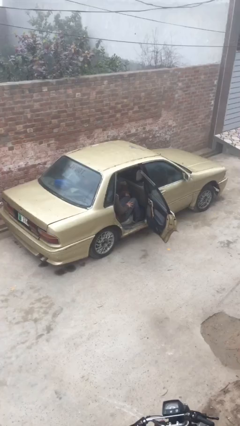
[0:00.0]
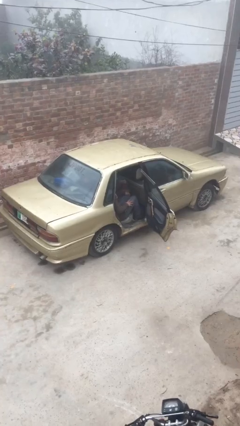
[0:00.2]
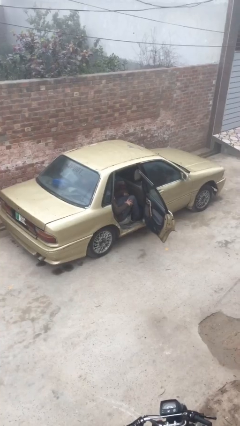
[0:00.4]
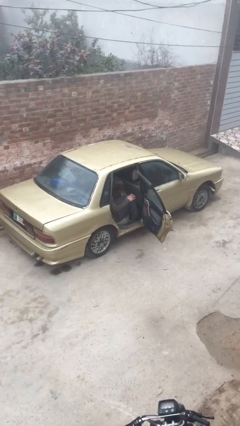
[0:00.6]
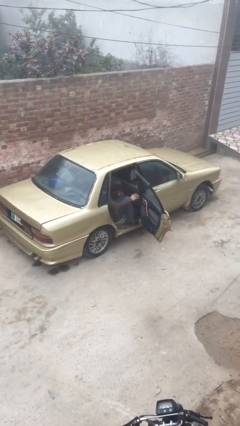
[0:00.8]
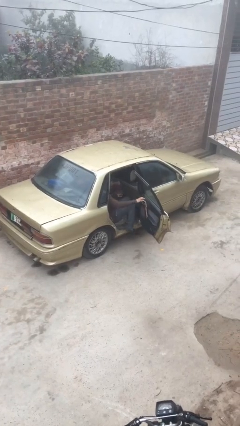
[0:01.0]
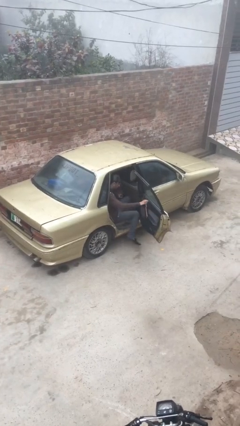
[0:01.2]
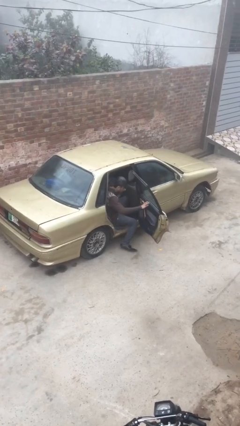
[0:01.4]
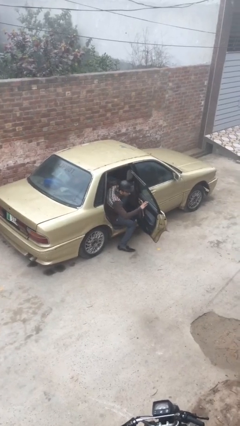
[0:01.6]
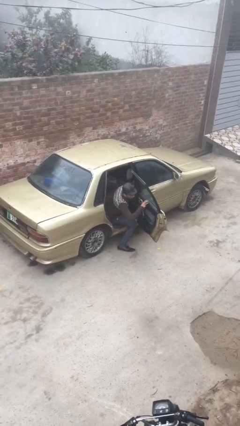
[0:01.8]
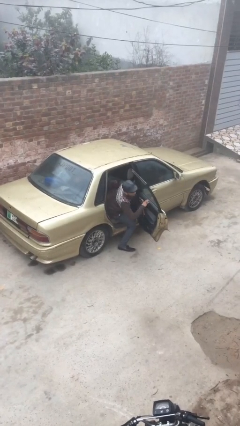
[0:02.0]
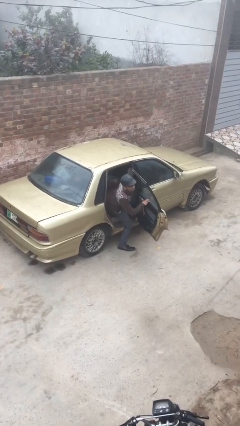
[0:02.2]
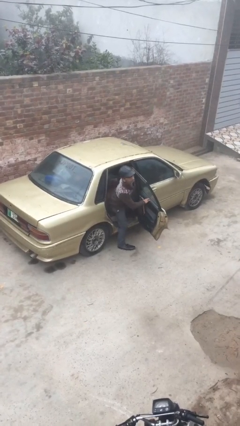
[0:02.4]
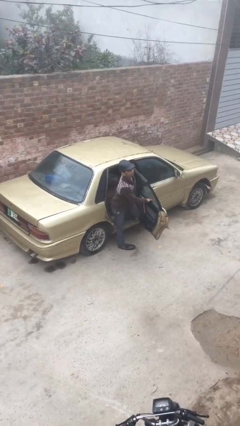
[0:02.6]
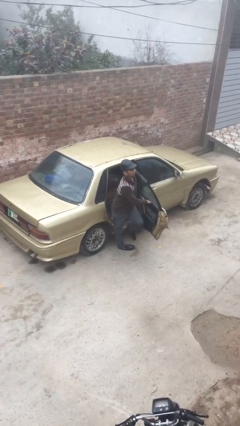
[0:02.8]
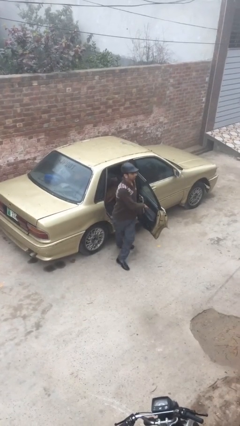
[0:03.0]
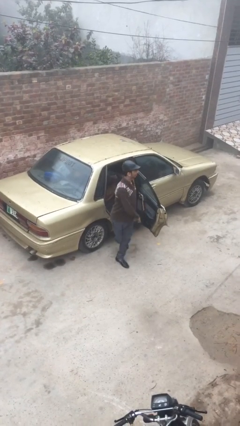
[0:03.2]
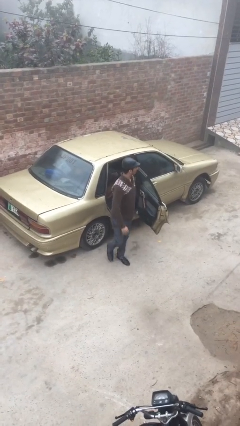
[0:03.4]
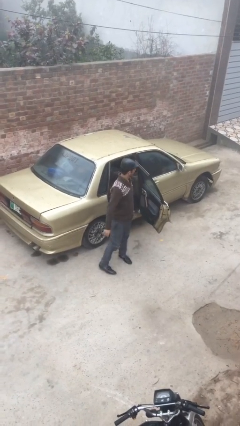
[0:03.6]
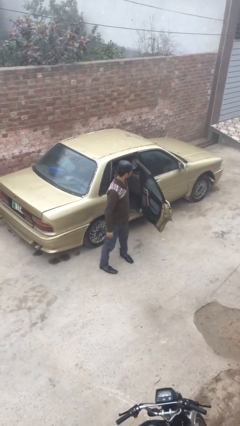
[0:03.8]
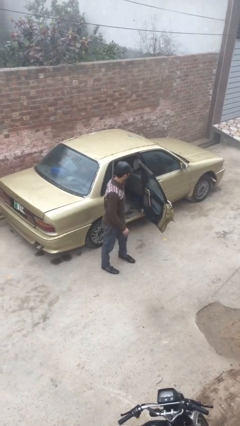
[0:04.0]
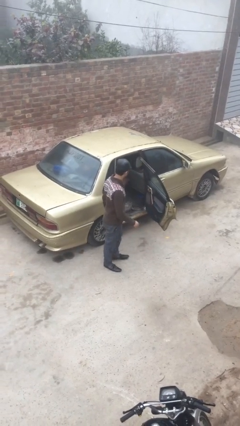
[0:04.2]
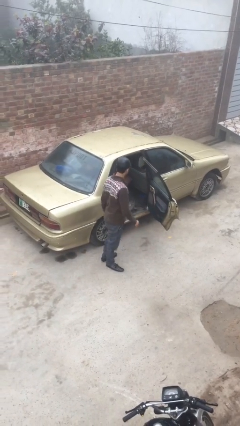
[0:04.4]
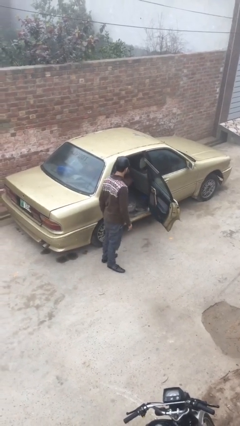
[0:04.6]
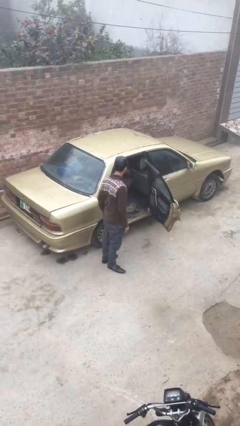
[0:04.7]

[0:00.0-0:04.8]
person exits car

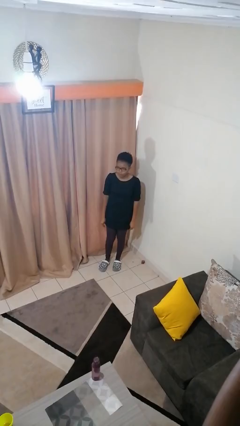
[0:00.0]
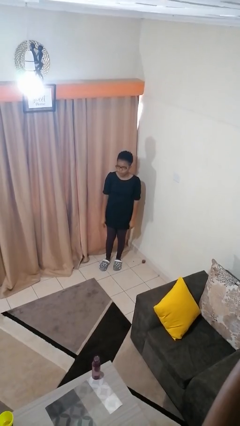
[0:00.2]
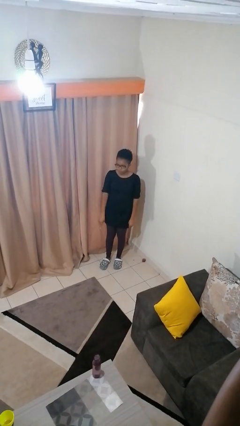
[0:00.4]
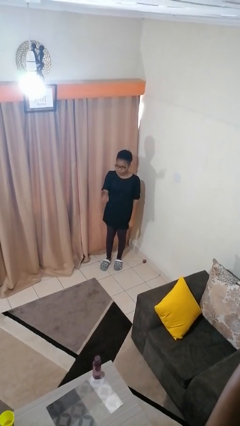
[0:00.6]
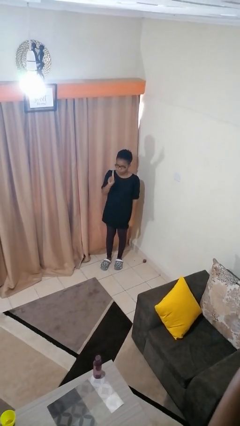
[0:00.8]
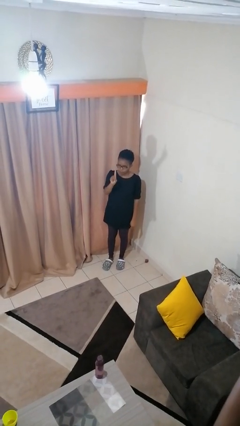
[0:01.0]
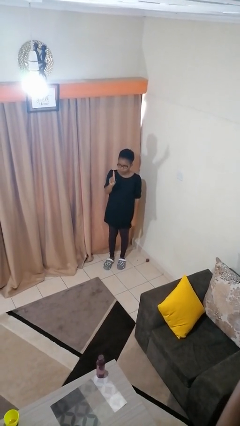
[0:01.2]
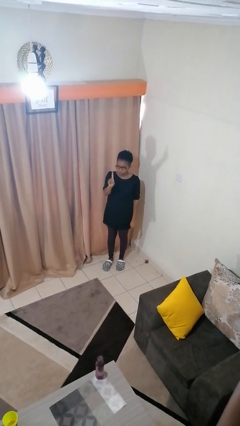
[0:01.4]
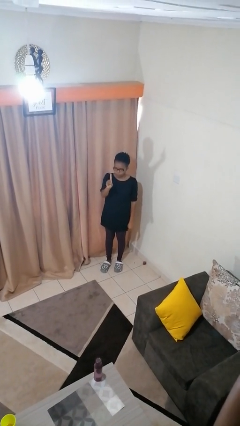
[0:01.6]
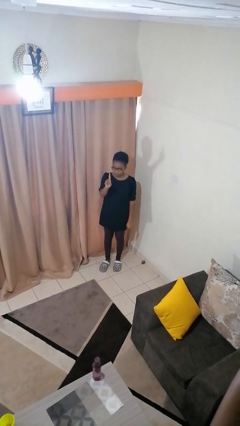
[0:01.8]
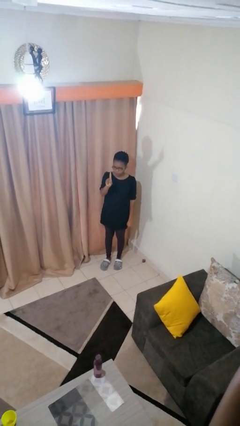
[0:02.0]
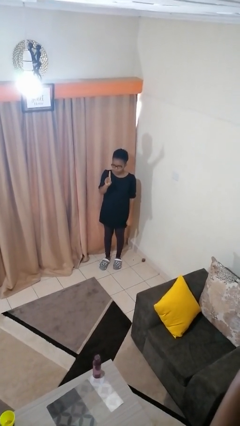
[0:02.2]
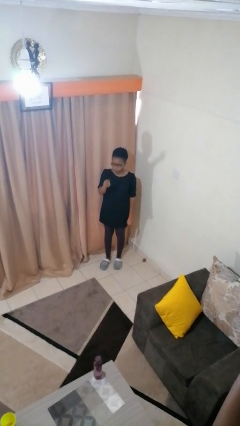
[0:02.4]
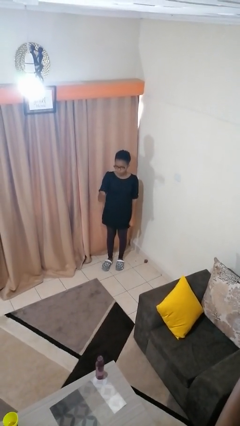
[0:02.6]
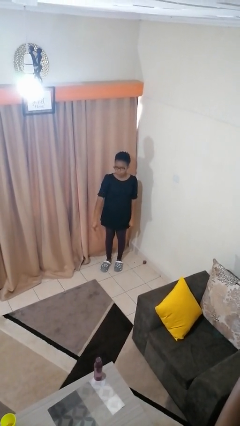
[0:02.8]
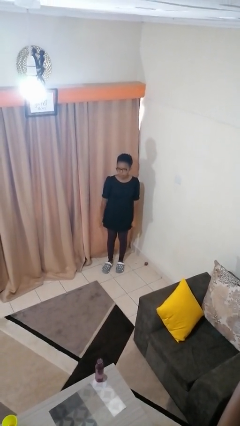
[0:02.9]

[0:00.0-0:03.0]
person gestures number one

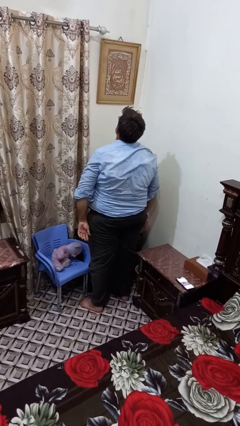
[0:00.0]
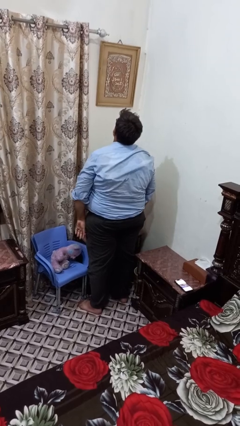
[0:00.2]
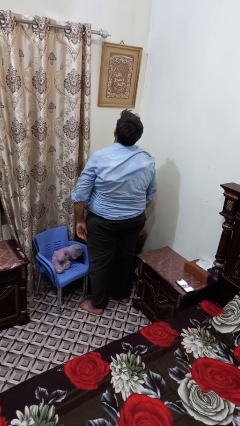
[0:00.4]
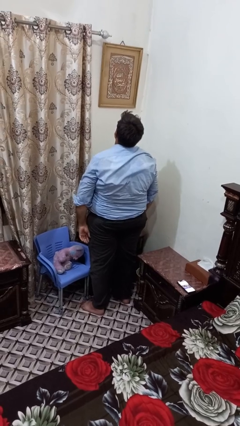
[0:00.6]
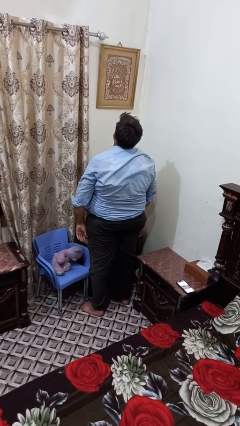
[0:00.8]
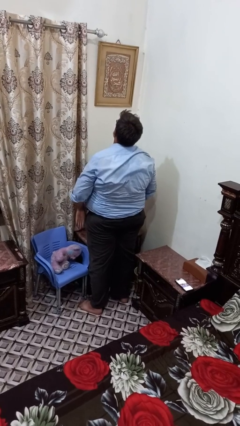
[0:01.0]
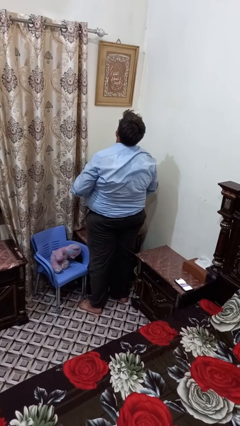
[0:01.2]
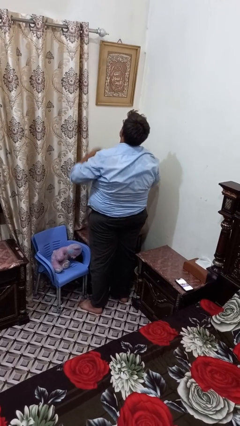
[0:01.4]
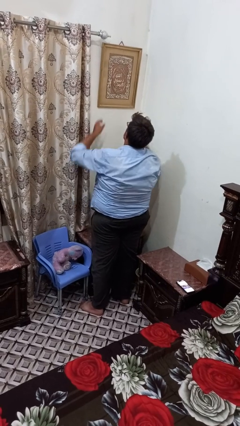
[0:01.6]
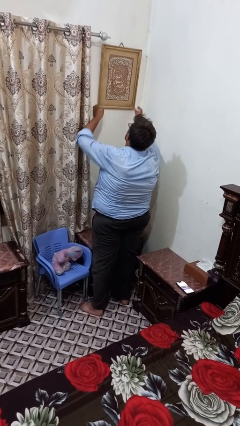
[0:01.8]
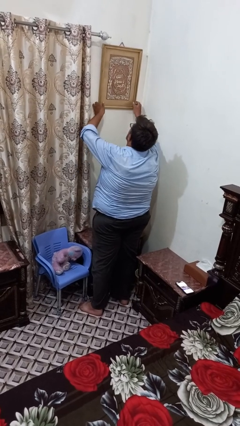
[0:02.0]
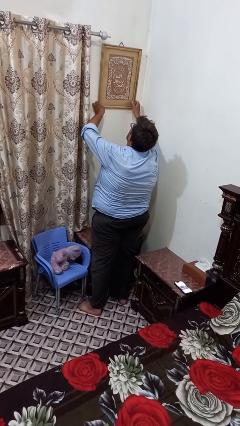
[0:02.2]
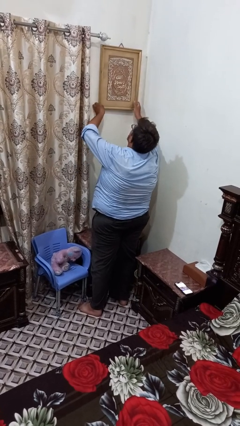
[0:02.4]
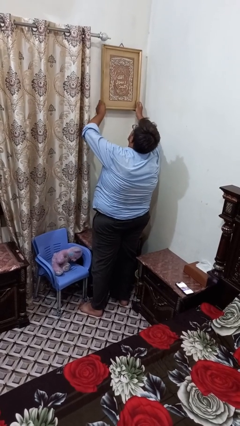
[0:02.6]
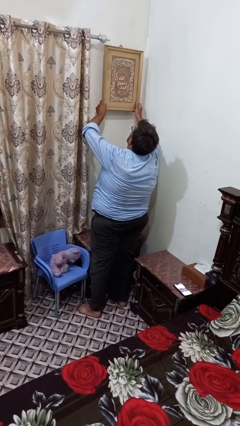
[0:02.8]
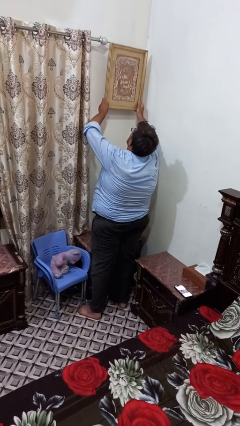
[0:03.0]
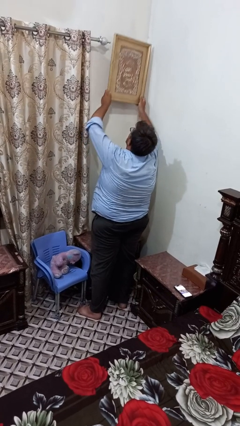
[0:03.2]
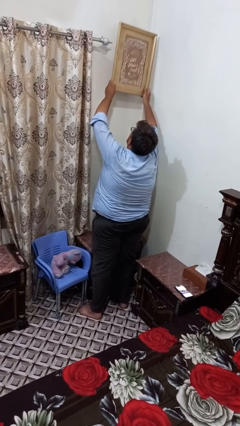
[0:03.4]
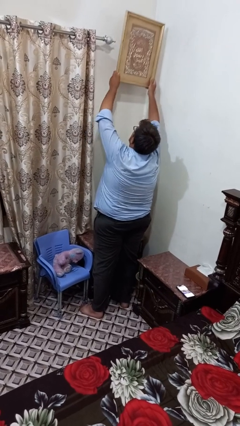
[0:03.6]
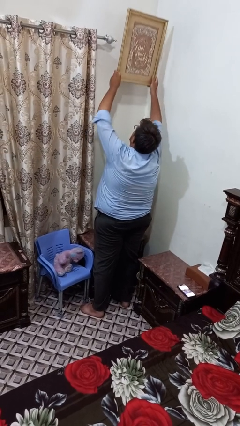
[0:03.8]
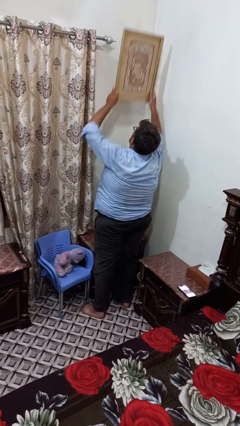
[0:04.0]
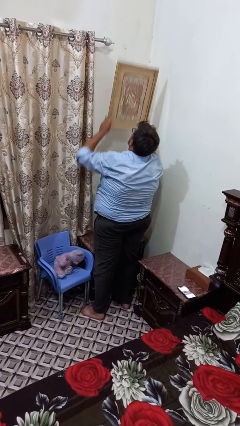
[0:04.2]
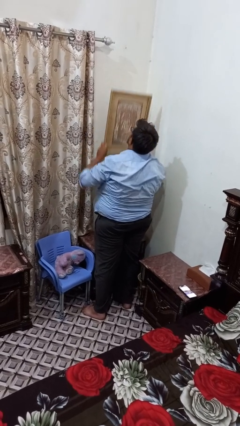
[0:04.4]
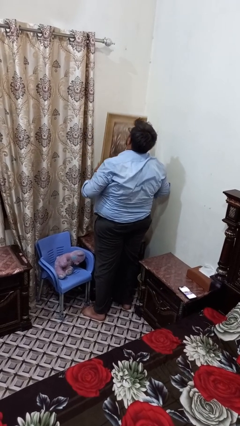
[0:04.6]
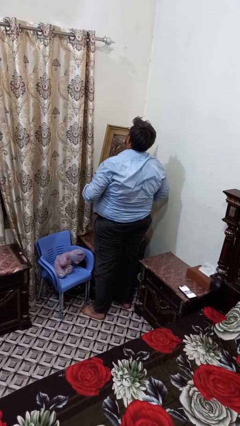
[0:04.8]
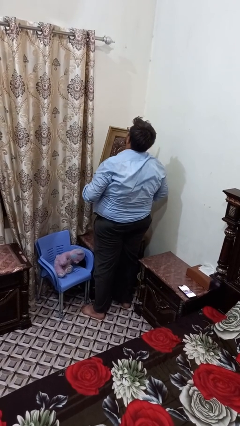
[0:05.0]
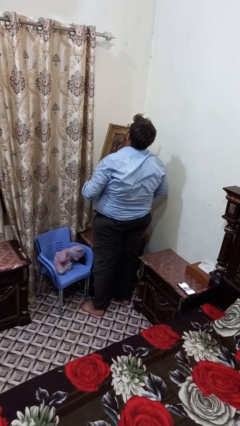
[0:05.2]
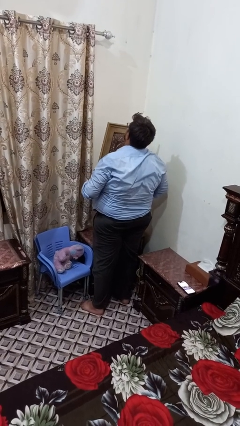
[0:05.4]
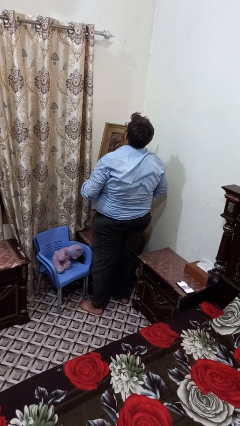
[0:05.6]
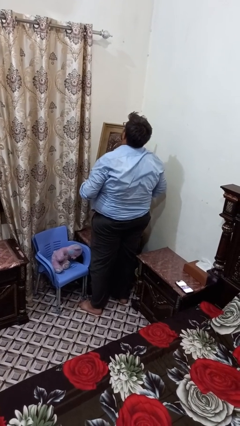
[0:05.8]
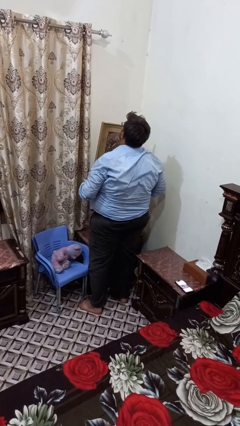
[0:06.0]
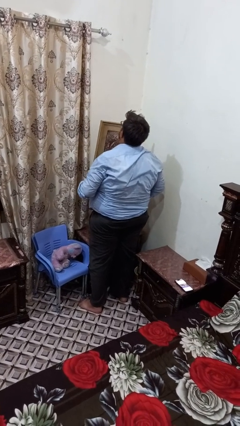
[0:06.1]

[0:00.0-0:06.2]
person takes down picture frame

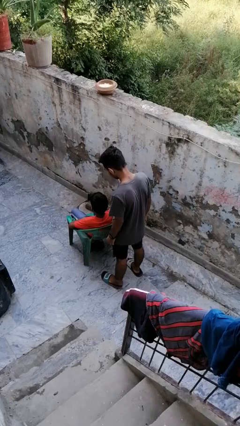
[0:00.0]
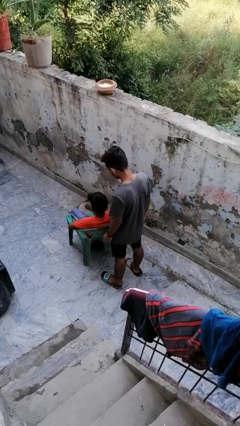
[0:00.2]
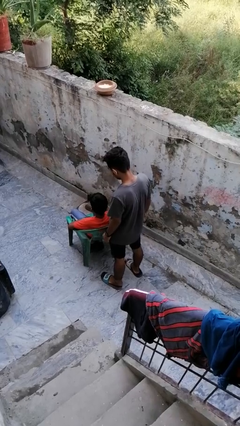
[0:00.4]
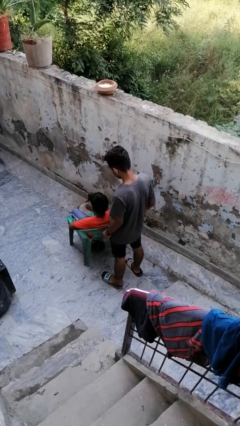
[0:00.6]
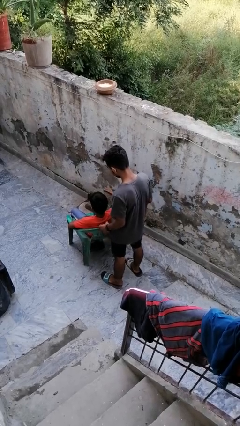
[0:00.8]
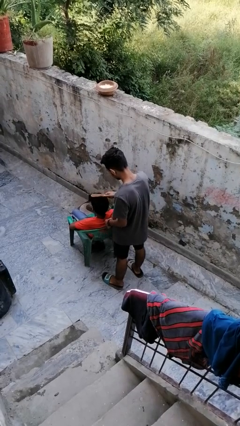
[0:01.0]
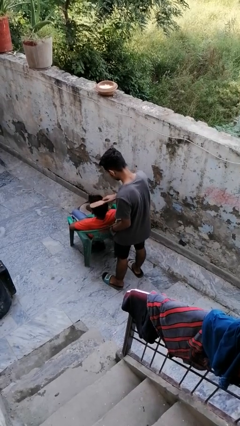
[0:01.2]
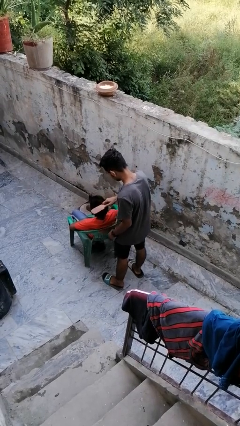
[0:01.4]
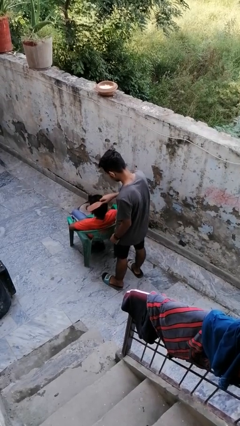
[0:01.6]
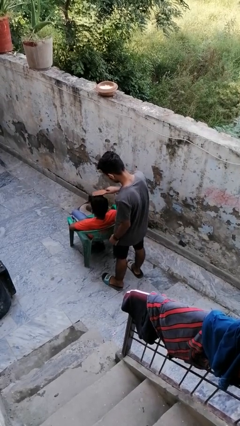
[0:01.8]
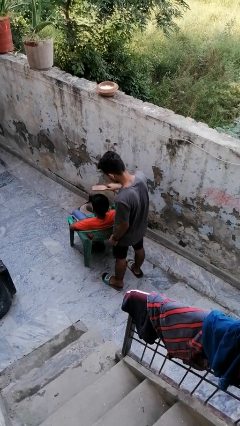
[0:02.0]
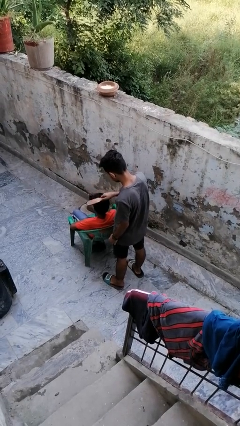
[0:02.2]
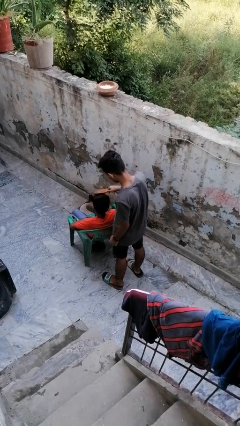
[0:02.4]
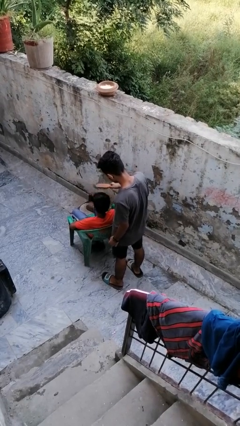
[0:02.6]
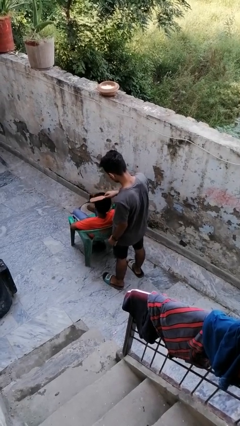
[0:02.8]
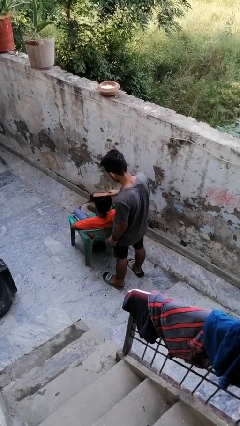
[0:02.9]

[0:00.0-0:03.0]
person brushes hair of person

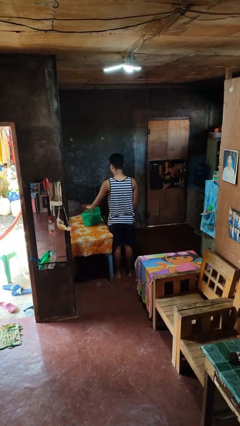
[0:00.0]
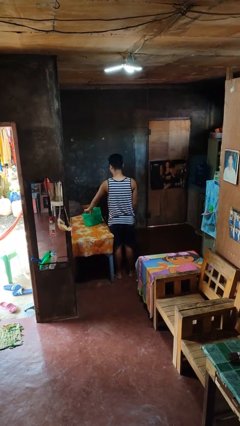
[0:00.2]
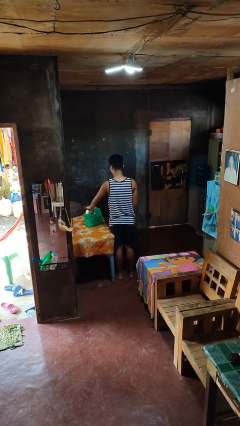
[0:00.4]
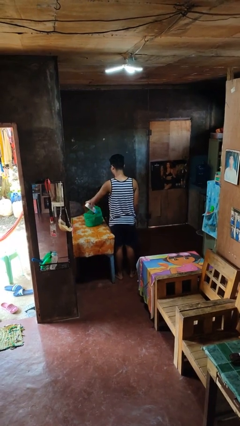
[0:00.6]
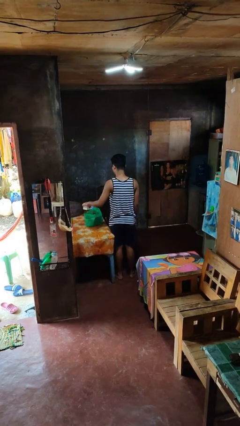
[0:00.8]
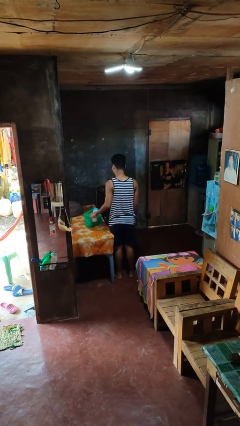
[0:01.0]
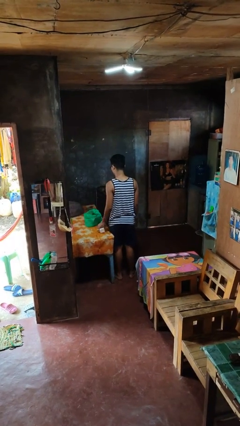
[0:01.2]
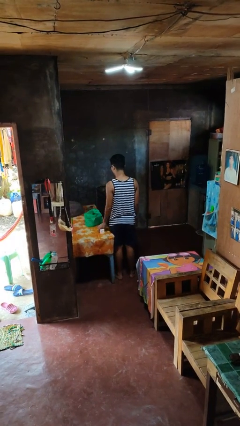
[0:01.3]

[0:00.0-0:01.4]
person takes object from bag
